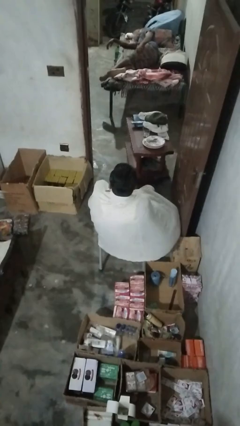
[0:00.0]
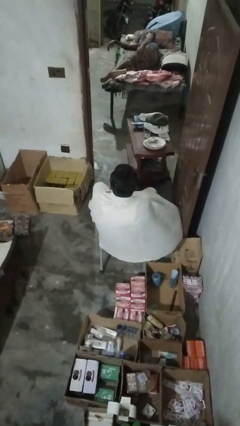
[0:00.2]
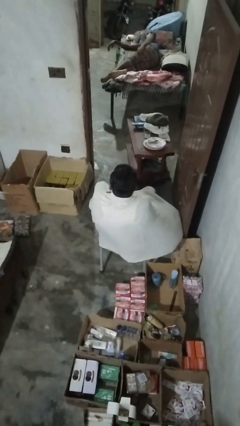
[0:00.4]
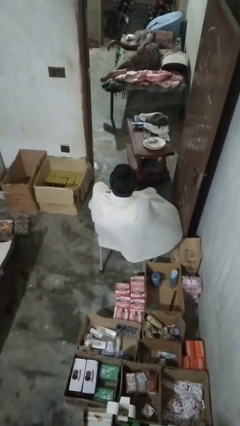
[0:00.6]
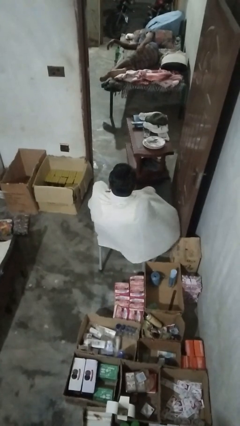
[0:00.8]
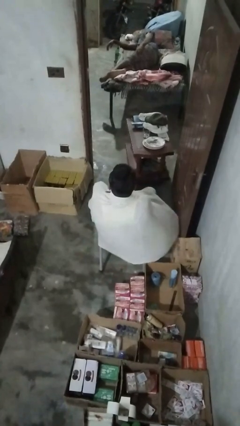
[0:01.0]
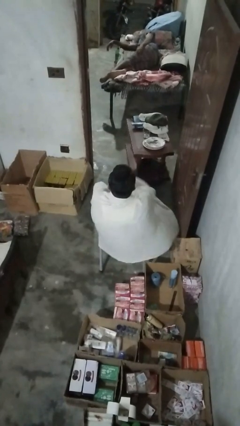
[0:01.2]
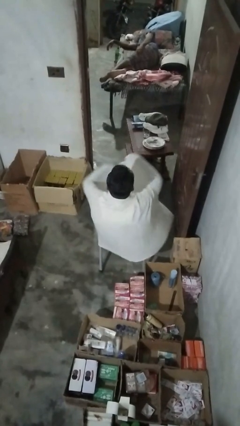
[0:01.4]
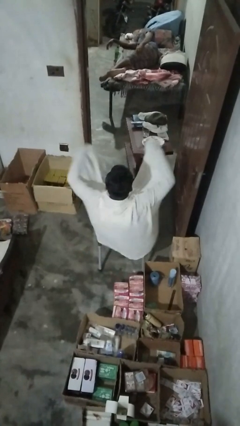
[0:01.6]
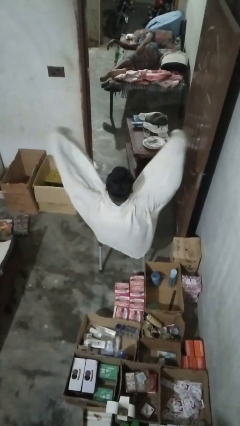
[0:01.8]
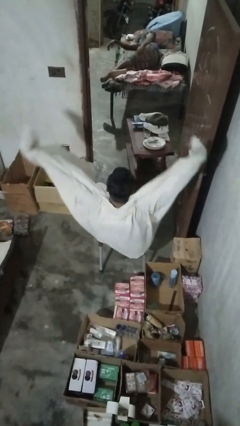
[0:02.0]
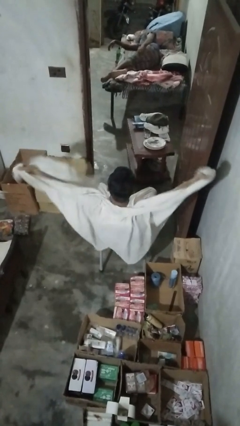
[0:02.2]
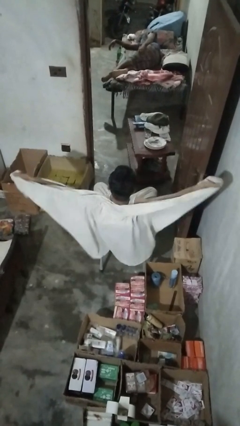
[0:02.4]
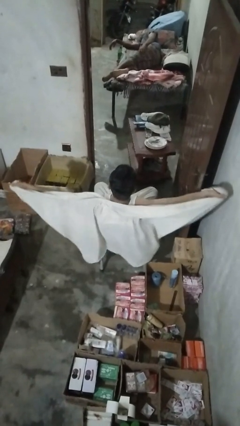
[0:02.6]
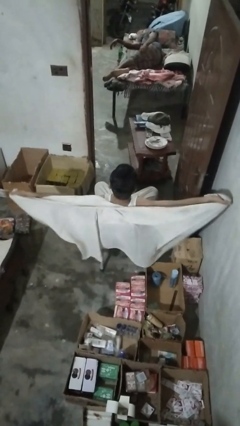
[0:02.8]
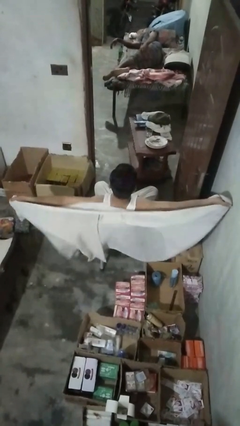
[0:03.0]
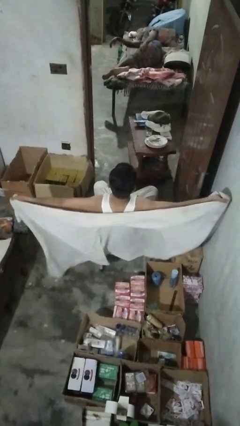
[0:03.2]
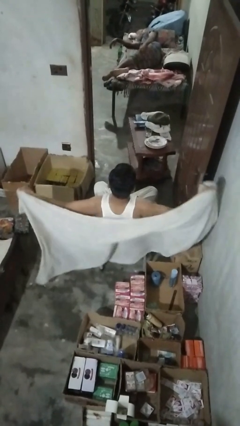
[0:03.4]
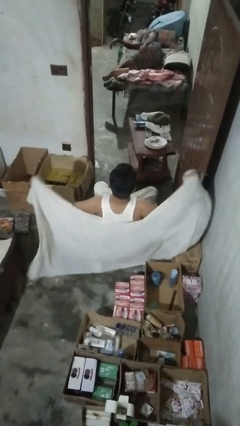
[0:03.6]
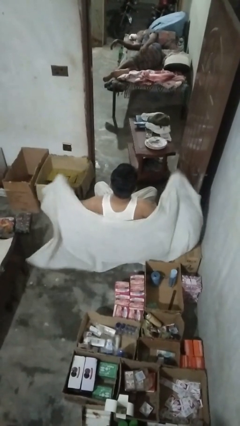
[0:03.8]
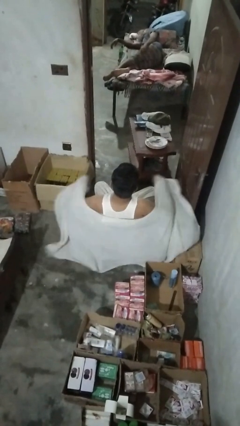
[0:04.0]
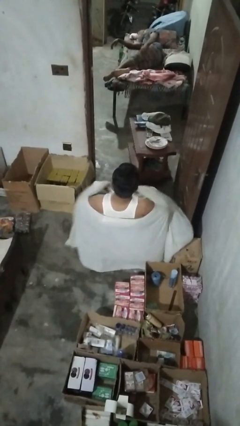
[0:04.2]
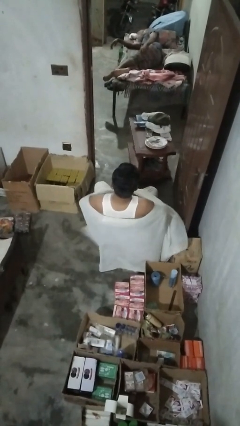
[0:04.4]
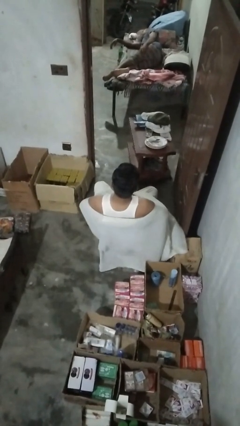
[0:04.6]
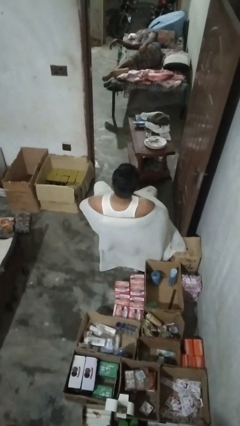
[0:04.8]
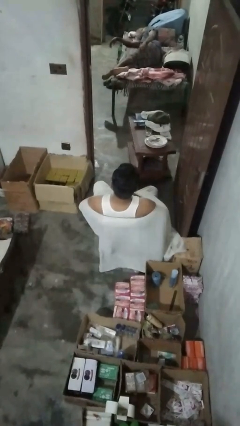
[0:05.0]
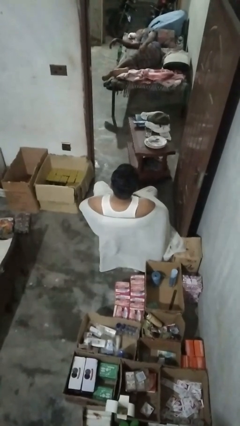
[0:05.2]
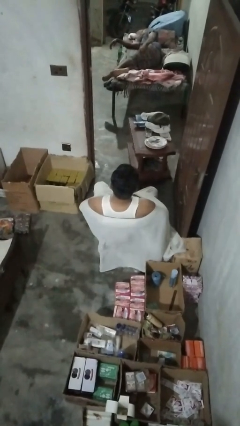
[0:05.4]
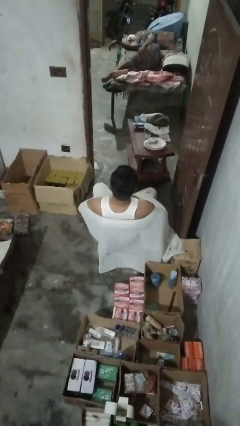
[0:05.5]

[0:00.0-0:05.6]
person uncovers with blanket

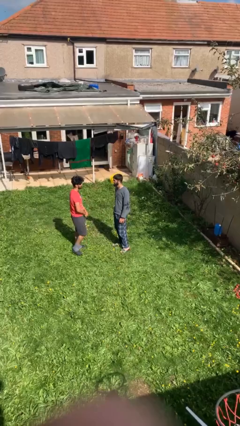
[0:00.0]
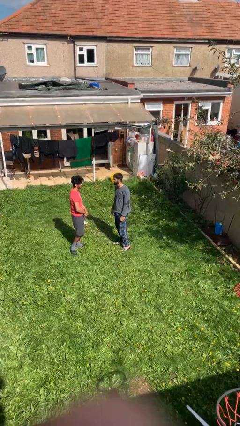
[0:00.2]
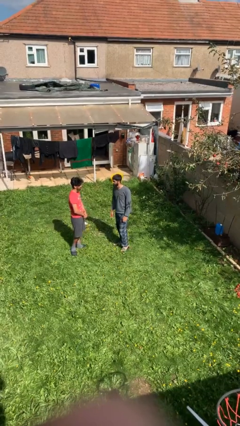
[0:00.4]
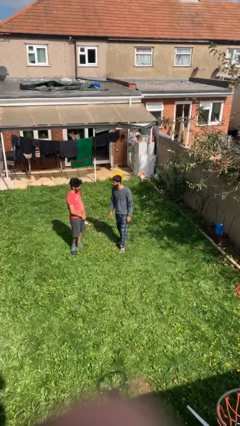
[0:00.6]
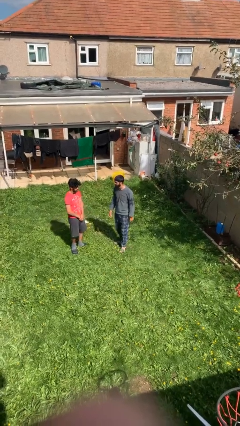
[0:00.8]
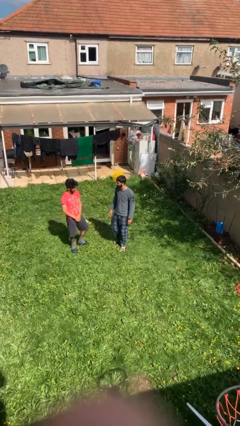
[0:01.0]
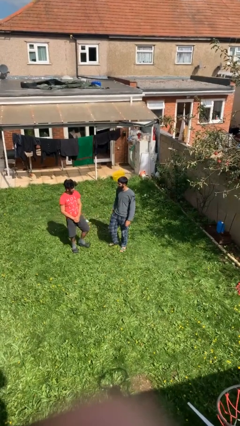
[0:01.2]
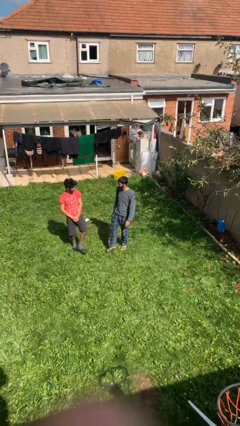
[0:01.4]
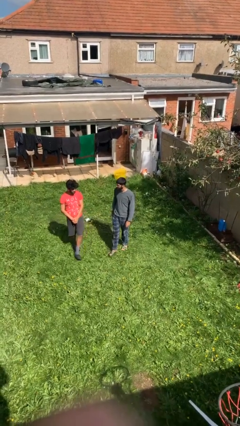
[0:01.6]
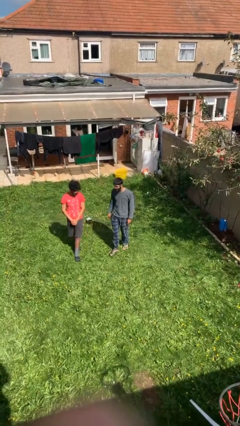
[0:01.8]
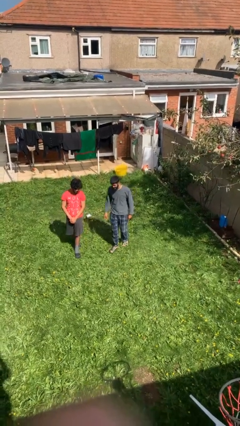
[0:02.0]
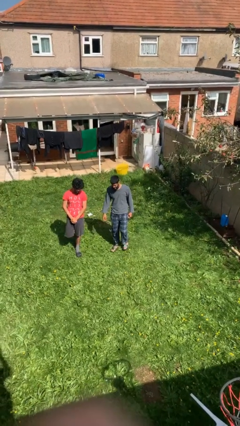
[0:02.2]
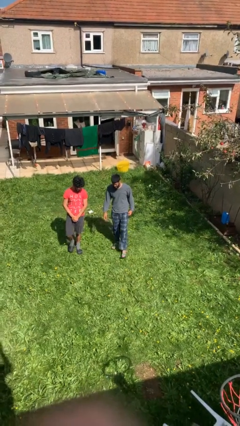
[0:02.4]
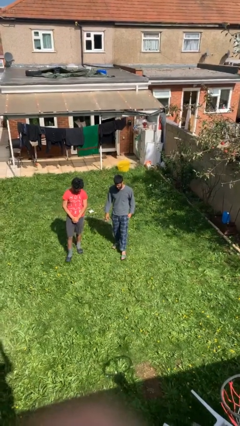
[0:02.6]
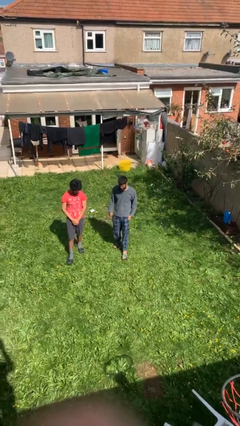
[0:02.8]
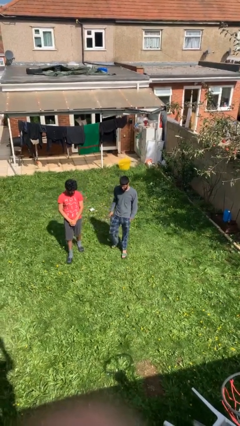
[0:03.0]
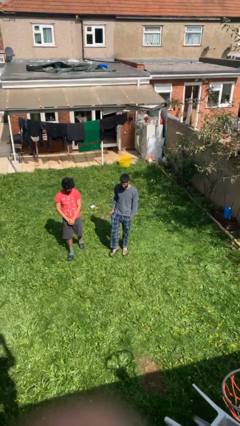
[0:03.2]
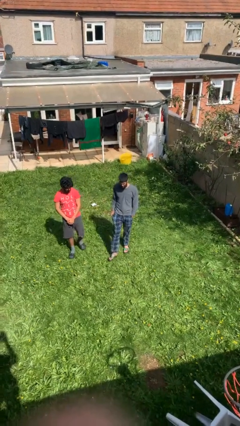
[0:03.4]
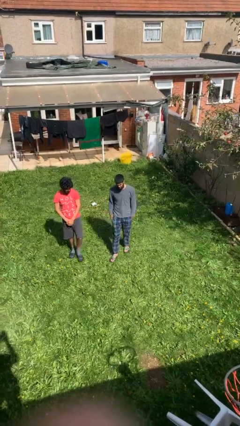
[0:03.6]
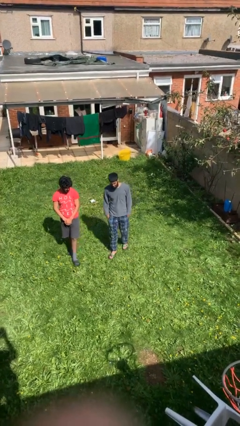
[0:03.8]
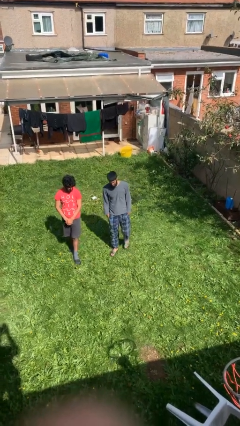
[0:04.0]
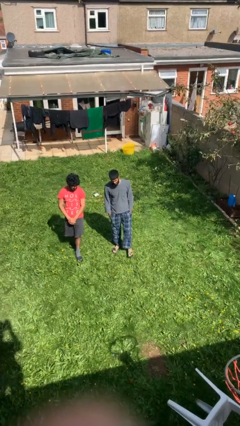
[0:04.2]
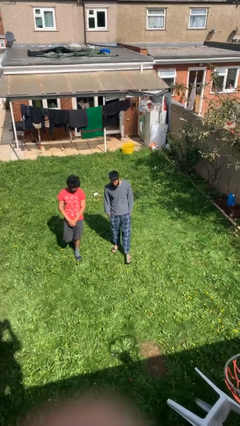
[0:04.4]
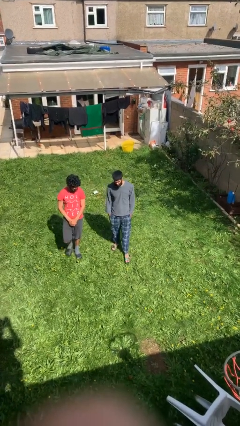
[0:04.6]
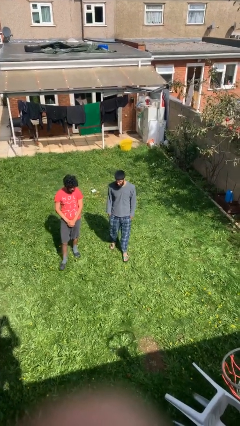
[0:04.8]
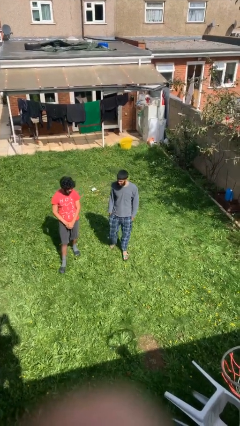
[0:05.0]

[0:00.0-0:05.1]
person talks to person

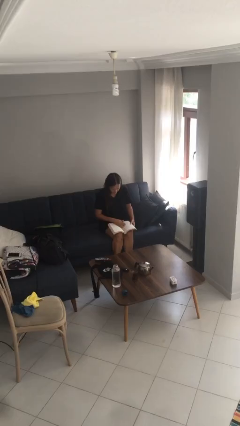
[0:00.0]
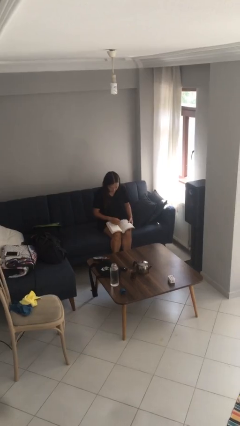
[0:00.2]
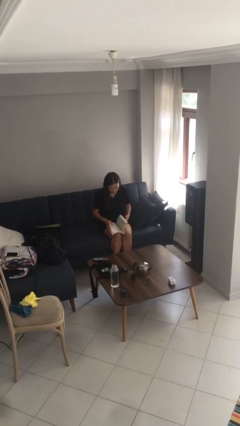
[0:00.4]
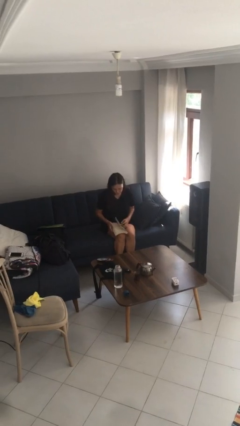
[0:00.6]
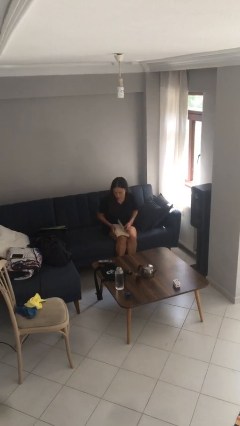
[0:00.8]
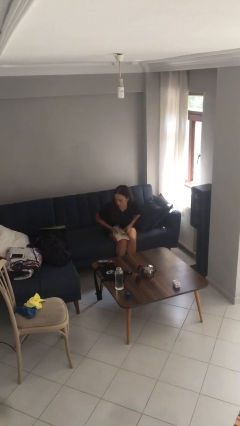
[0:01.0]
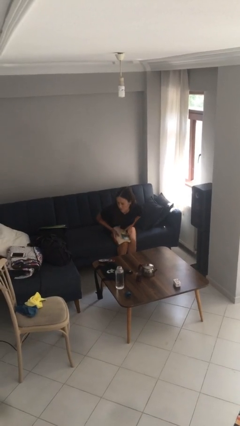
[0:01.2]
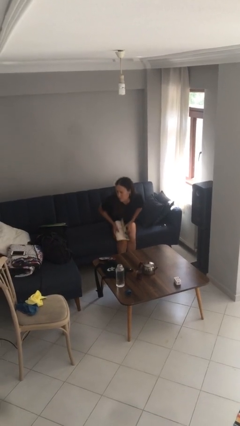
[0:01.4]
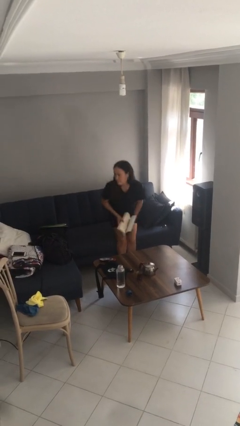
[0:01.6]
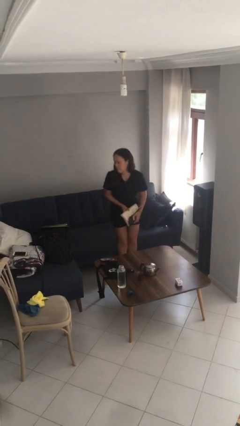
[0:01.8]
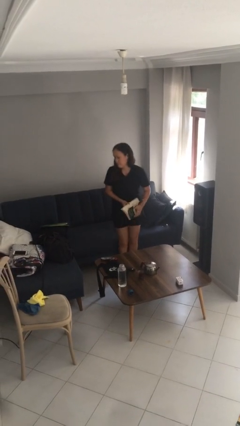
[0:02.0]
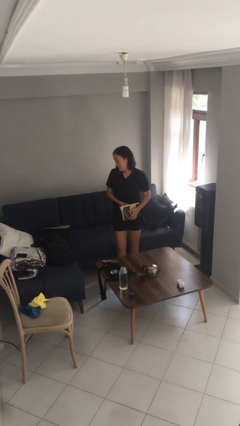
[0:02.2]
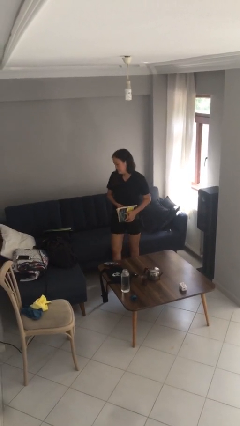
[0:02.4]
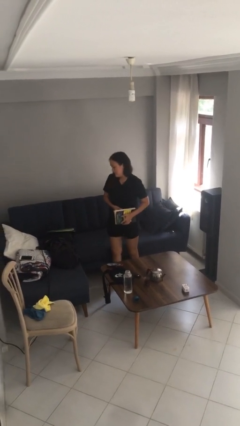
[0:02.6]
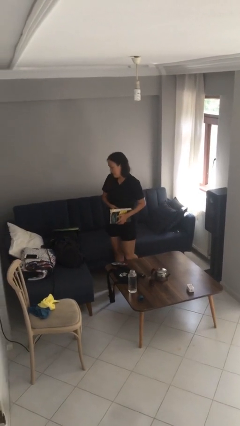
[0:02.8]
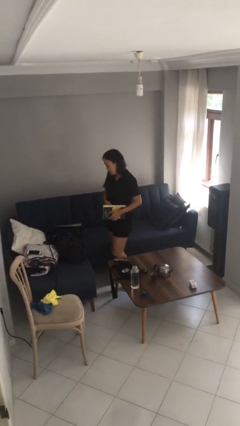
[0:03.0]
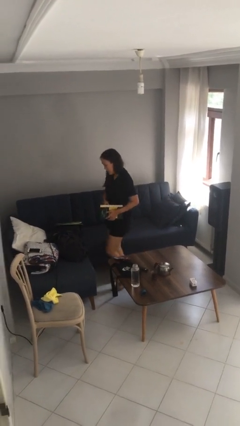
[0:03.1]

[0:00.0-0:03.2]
person stands up

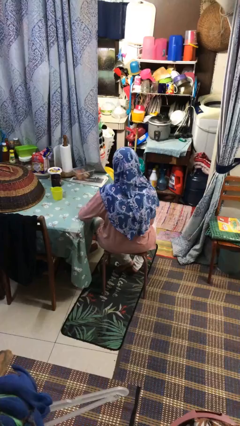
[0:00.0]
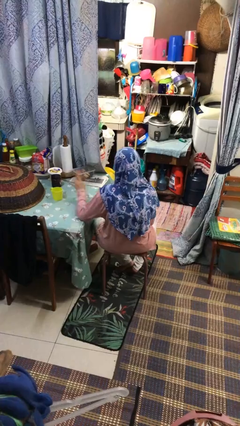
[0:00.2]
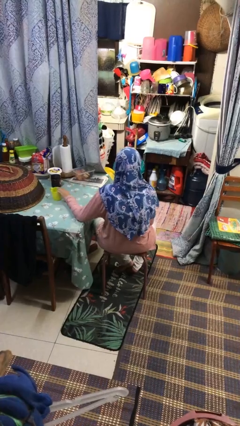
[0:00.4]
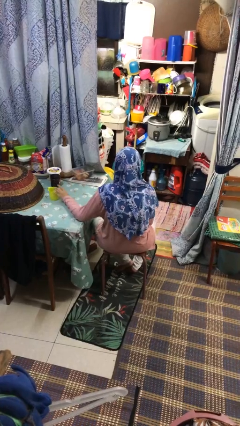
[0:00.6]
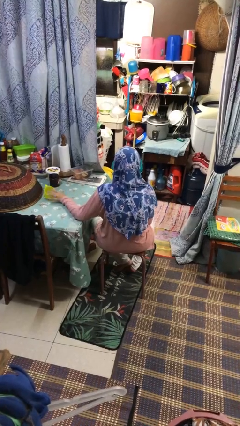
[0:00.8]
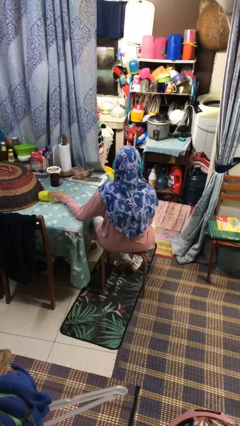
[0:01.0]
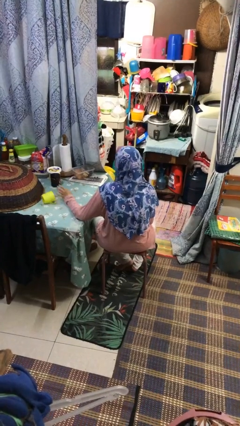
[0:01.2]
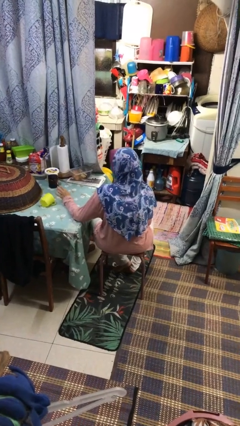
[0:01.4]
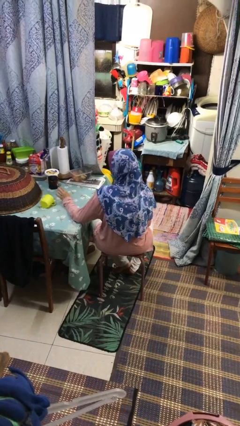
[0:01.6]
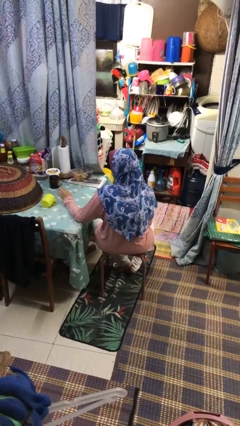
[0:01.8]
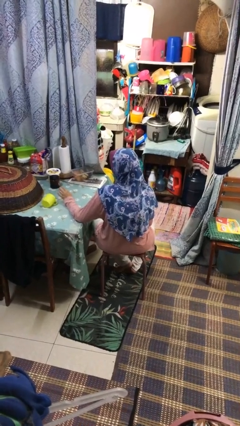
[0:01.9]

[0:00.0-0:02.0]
person knocks over glass

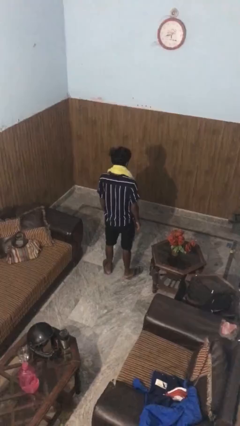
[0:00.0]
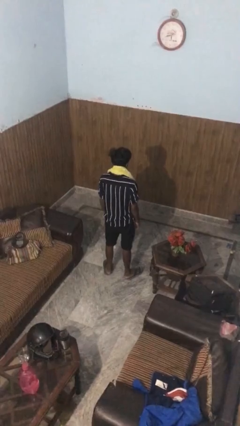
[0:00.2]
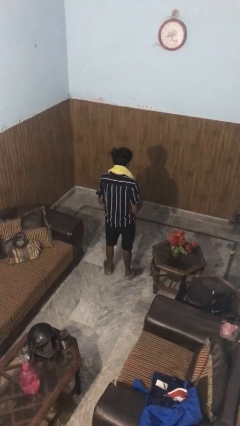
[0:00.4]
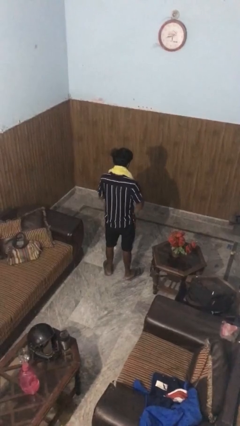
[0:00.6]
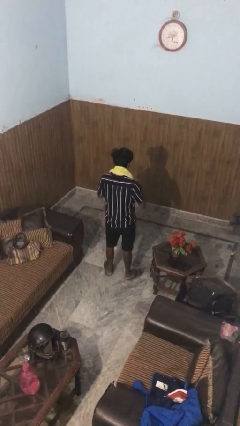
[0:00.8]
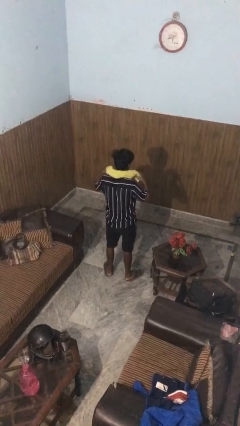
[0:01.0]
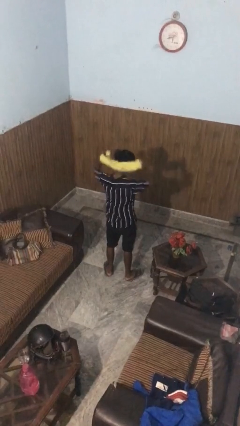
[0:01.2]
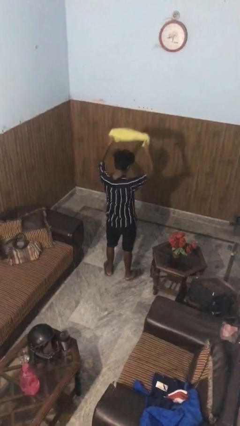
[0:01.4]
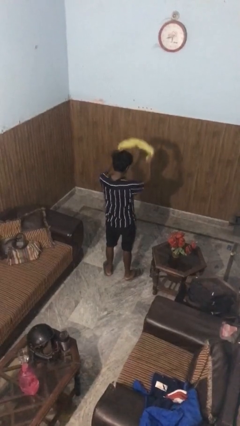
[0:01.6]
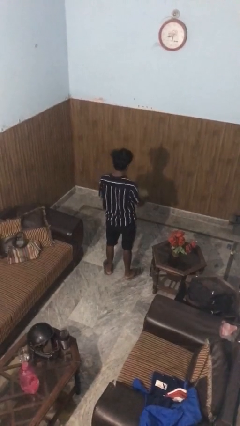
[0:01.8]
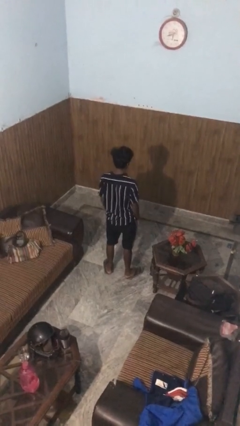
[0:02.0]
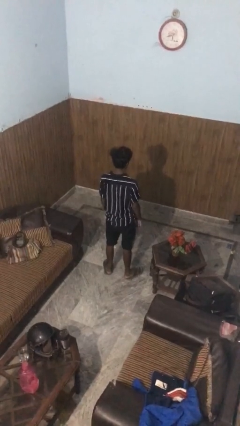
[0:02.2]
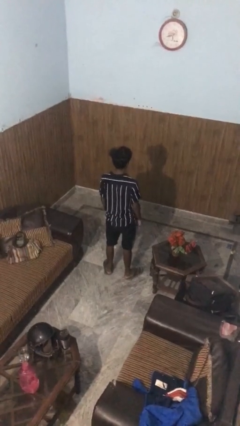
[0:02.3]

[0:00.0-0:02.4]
person takes off scarf
